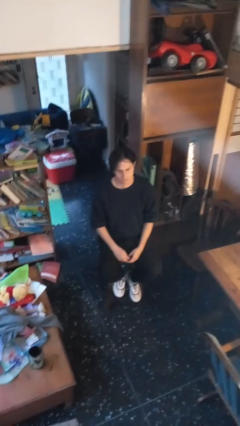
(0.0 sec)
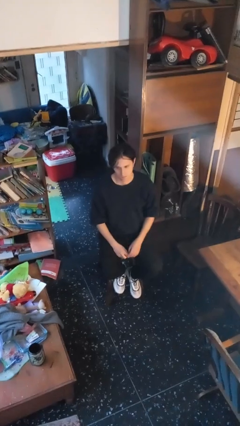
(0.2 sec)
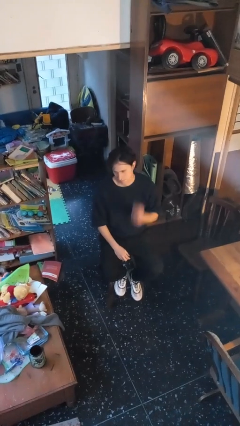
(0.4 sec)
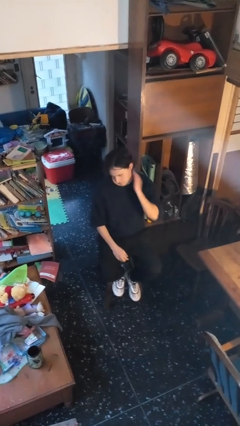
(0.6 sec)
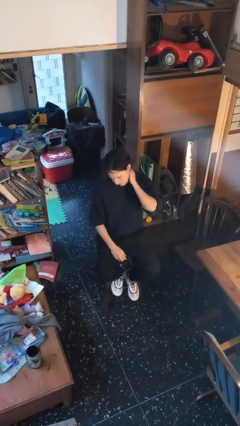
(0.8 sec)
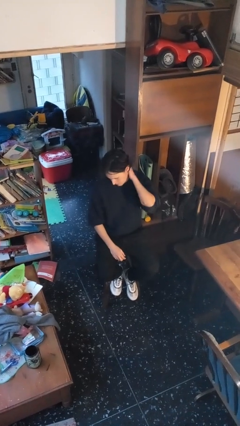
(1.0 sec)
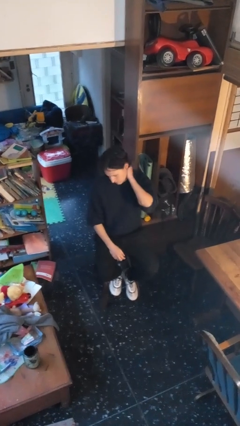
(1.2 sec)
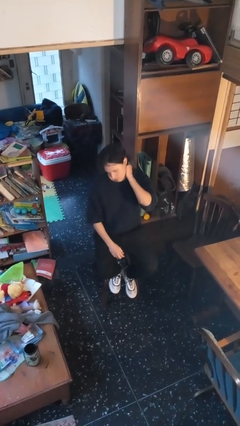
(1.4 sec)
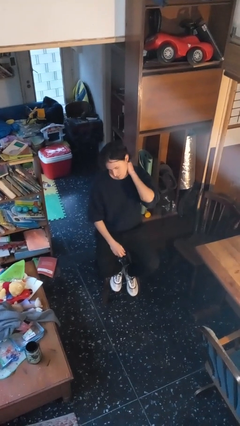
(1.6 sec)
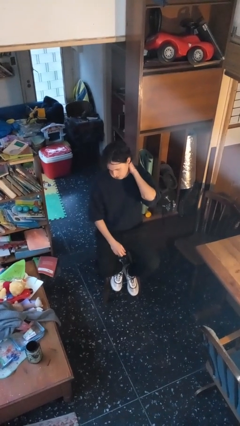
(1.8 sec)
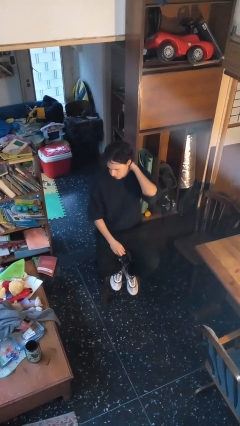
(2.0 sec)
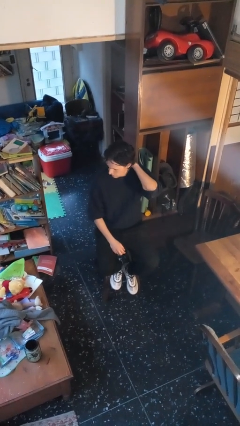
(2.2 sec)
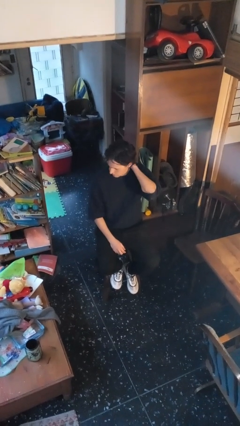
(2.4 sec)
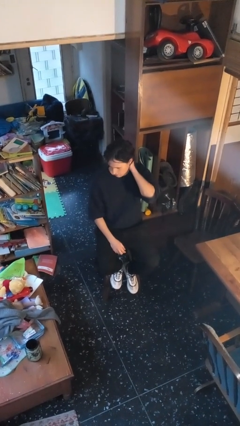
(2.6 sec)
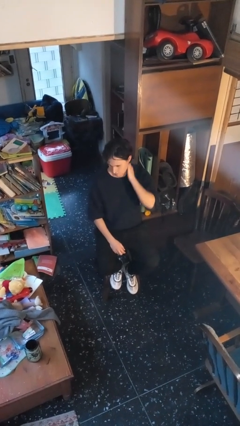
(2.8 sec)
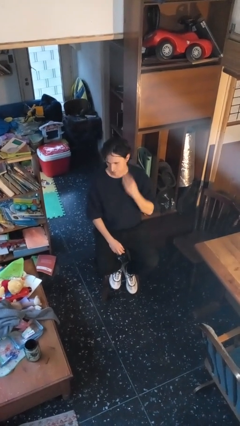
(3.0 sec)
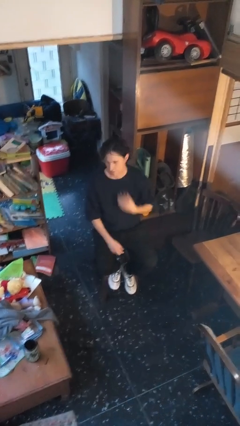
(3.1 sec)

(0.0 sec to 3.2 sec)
person rubs neck

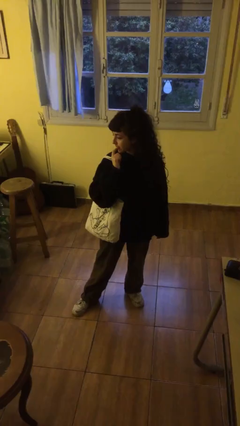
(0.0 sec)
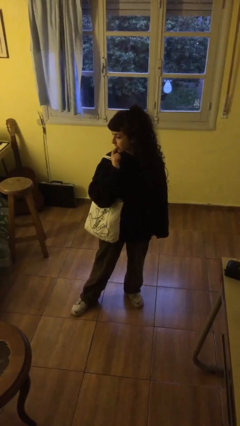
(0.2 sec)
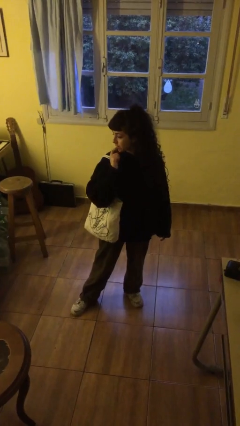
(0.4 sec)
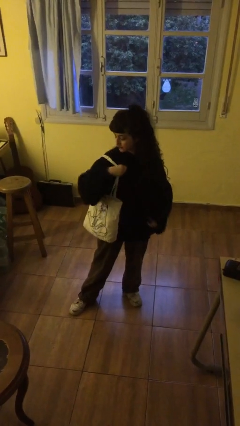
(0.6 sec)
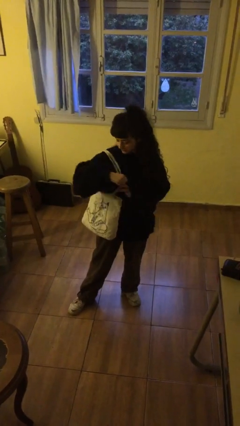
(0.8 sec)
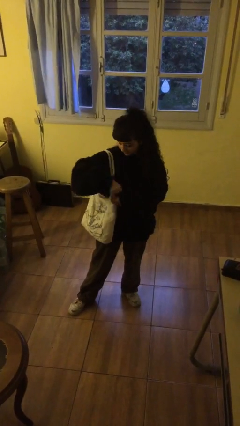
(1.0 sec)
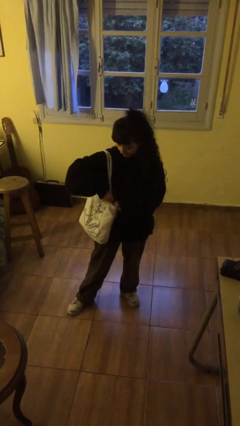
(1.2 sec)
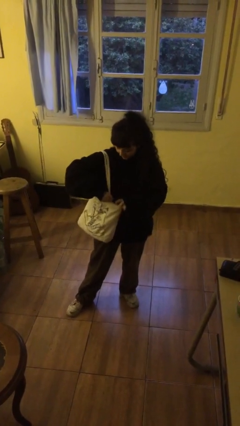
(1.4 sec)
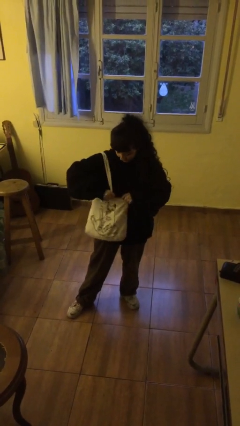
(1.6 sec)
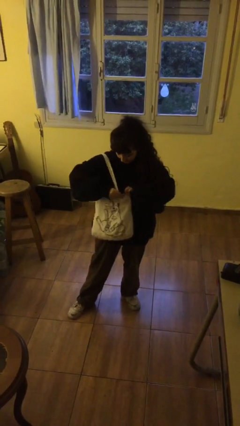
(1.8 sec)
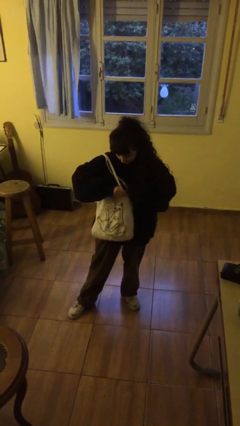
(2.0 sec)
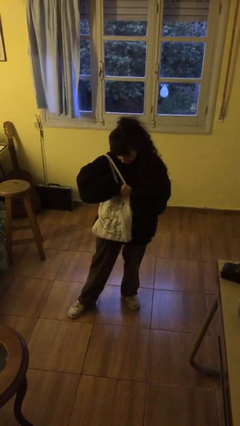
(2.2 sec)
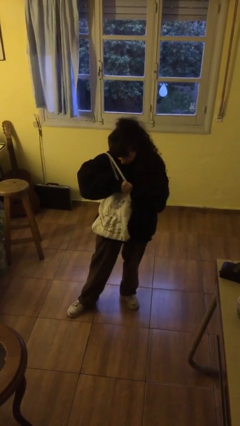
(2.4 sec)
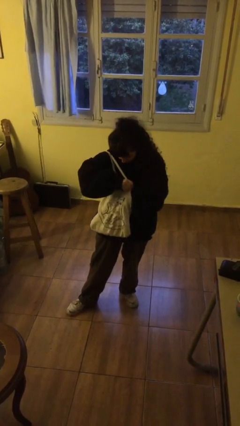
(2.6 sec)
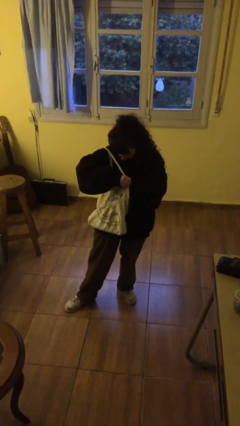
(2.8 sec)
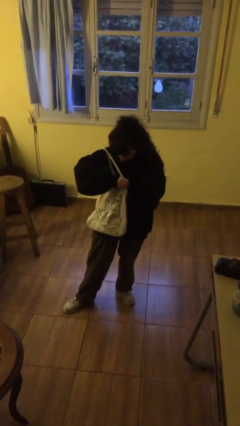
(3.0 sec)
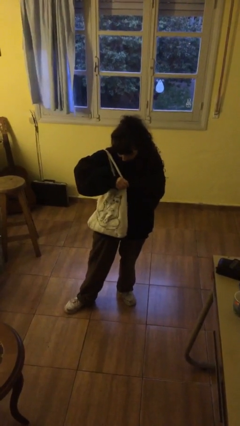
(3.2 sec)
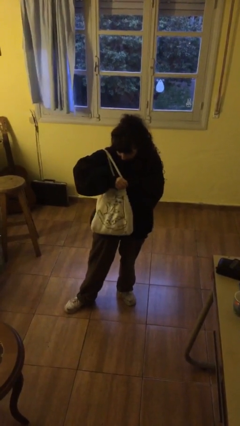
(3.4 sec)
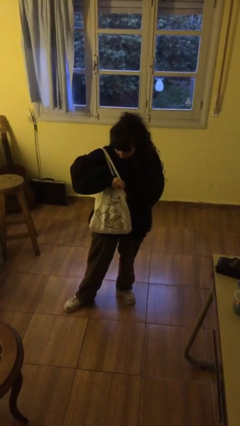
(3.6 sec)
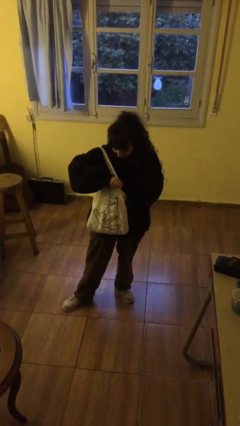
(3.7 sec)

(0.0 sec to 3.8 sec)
person searches in purse

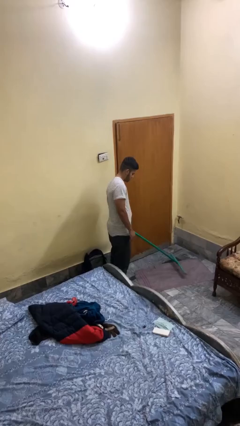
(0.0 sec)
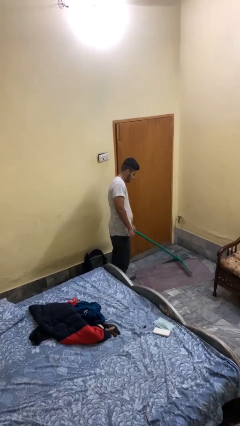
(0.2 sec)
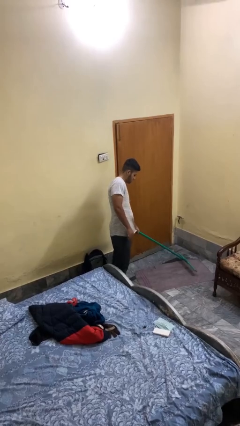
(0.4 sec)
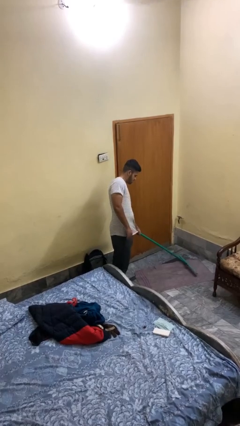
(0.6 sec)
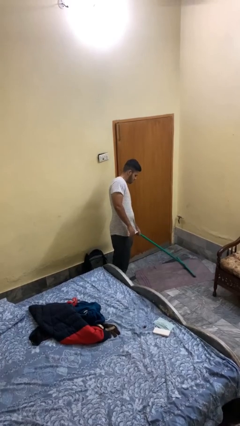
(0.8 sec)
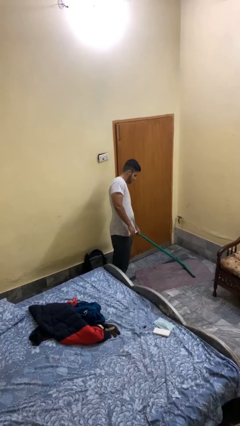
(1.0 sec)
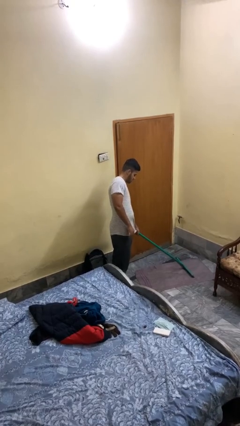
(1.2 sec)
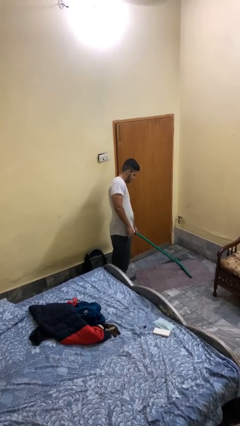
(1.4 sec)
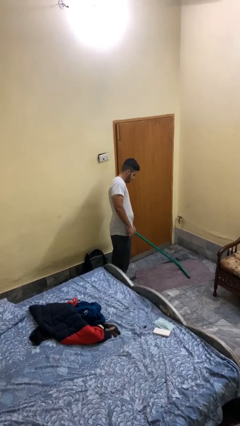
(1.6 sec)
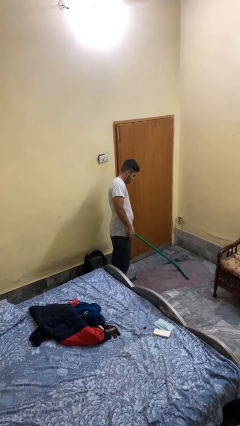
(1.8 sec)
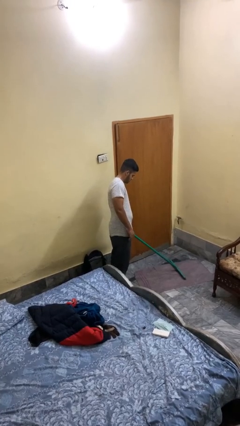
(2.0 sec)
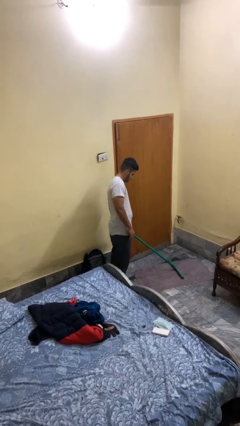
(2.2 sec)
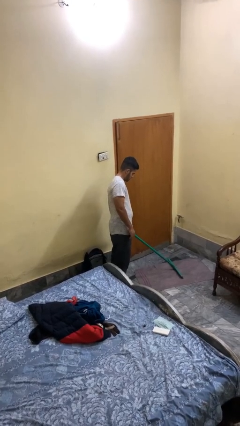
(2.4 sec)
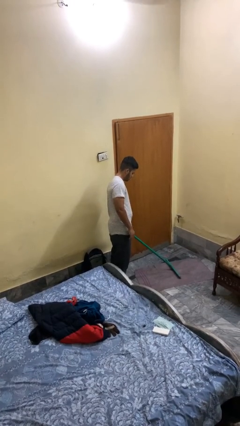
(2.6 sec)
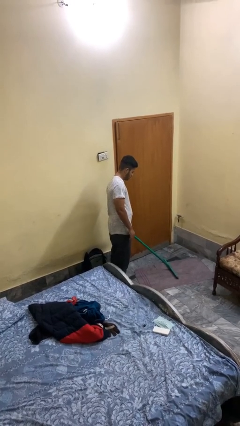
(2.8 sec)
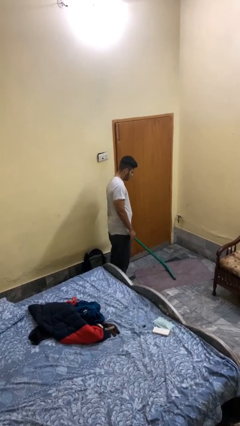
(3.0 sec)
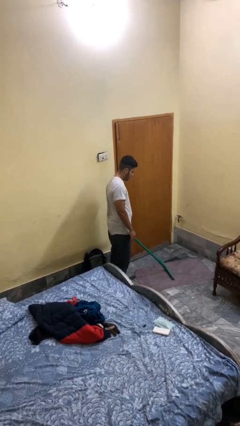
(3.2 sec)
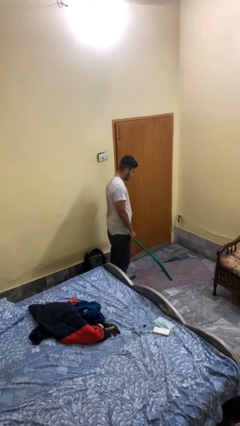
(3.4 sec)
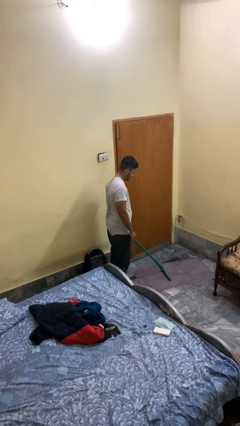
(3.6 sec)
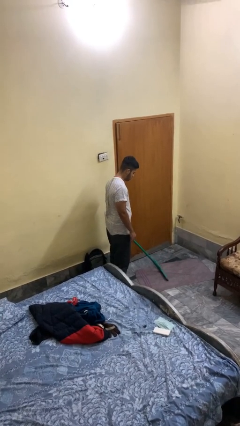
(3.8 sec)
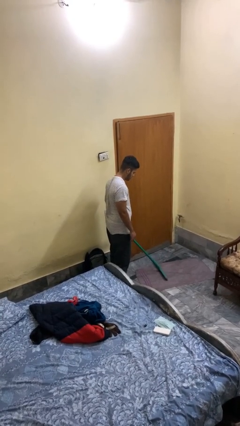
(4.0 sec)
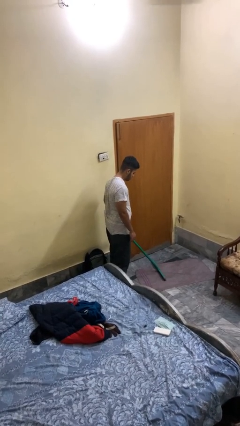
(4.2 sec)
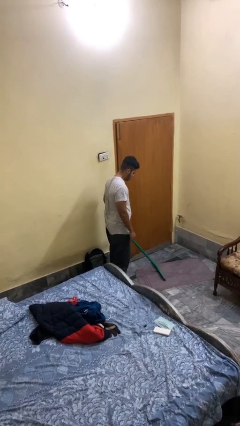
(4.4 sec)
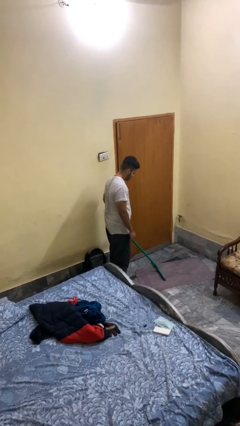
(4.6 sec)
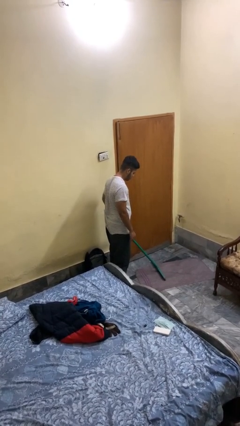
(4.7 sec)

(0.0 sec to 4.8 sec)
person vacuums carpet

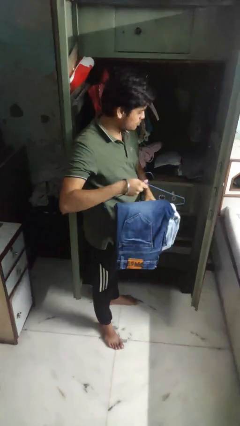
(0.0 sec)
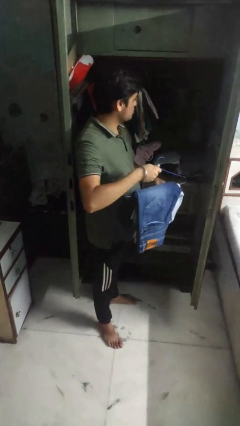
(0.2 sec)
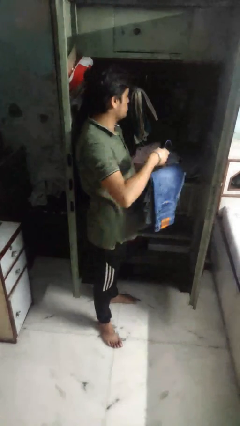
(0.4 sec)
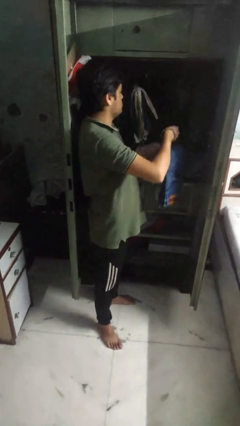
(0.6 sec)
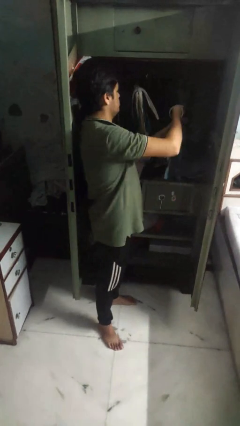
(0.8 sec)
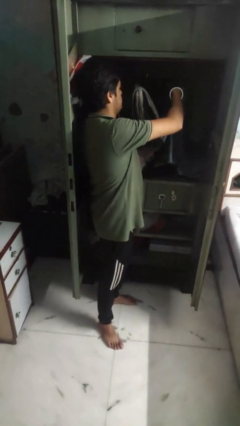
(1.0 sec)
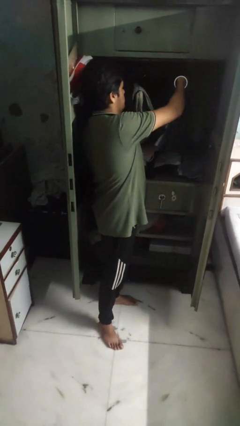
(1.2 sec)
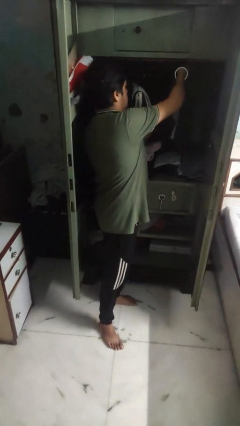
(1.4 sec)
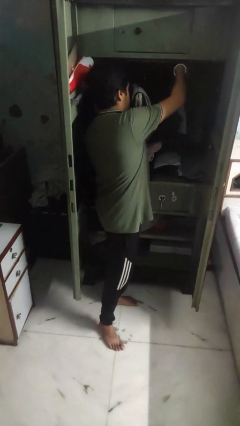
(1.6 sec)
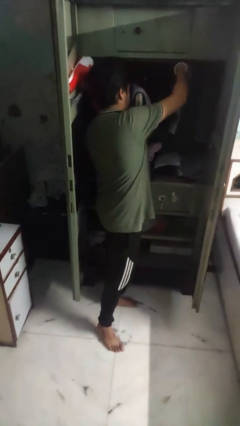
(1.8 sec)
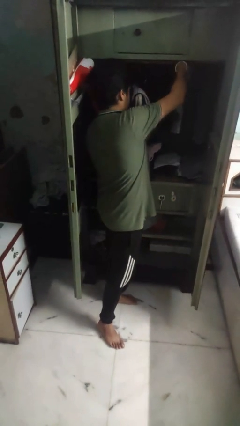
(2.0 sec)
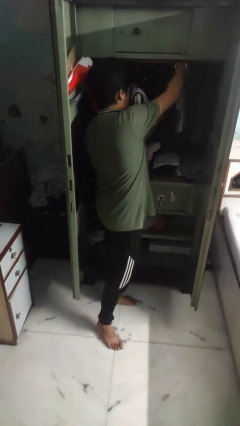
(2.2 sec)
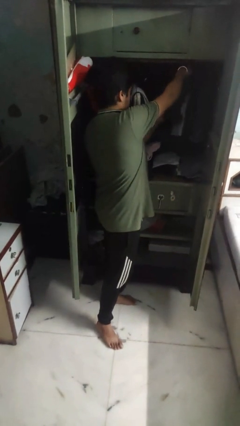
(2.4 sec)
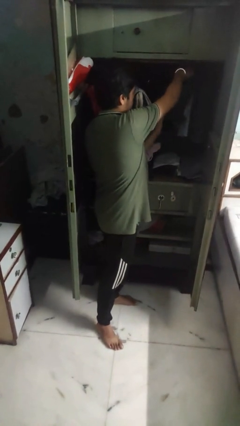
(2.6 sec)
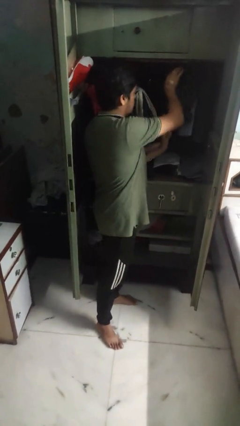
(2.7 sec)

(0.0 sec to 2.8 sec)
person puts clothes into closet

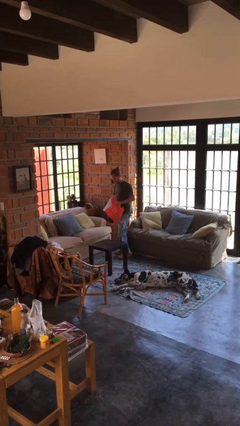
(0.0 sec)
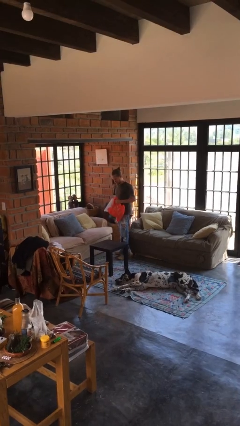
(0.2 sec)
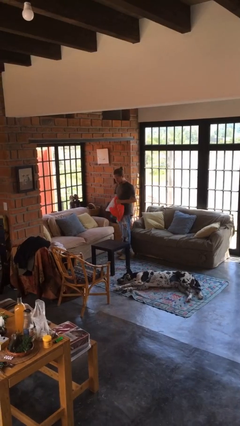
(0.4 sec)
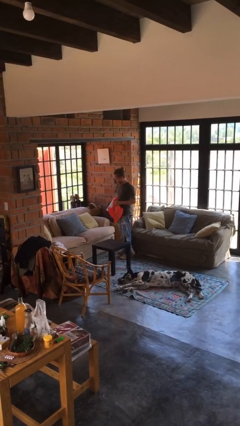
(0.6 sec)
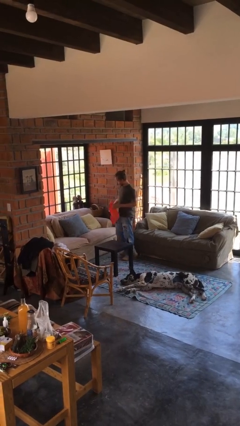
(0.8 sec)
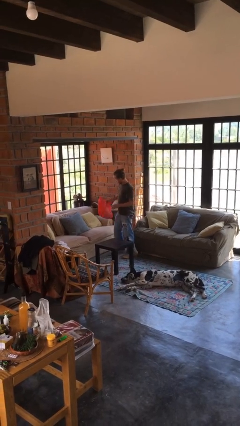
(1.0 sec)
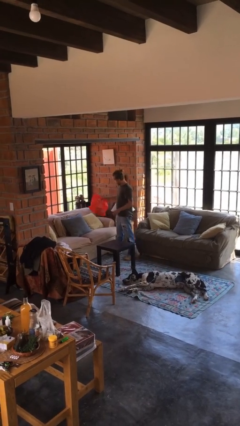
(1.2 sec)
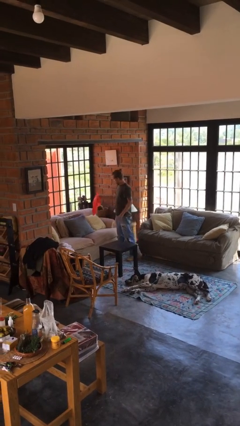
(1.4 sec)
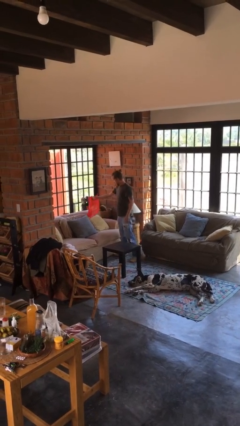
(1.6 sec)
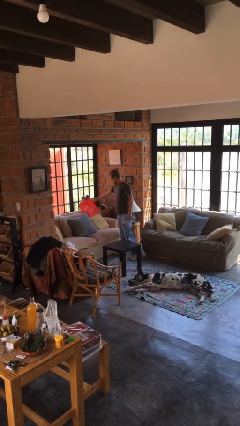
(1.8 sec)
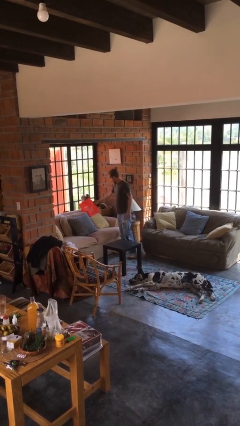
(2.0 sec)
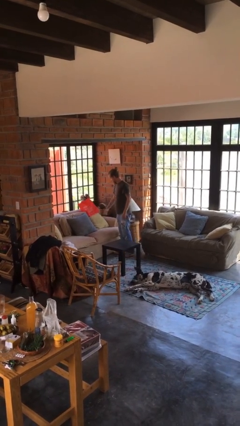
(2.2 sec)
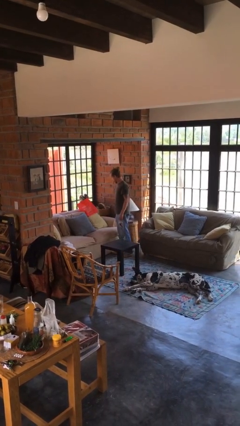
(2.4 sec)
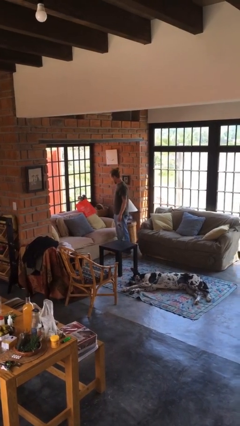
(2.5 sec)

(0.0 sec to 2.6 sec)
person puts down object on couch
